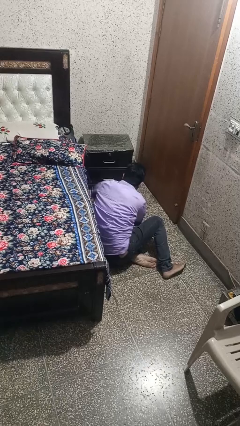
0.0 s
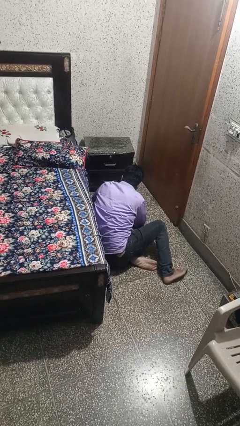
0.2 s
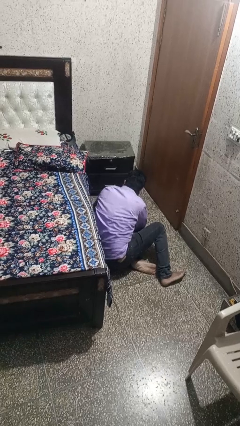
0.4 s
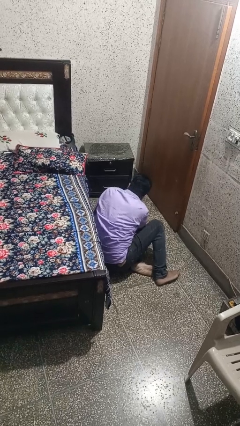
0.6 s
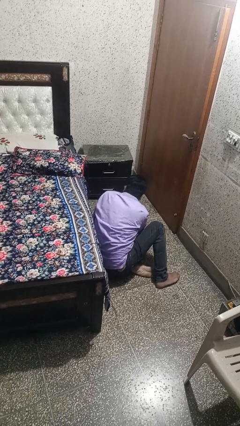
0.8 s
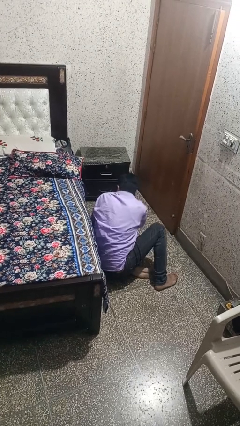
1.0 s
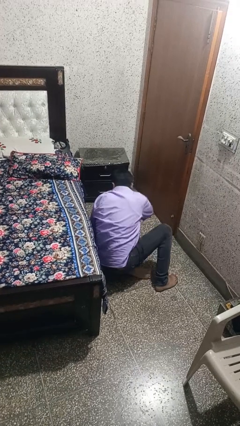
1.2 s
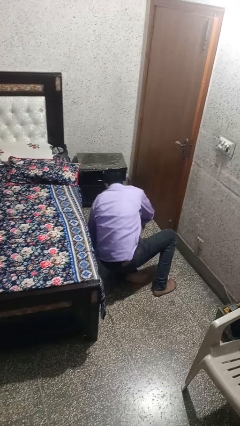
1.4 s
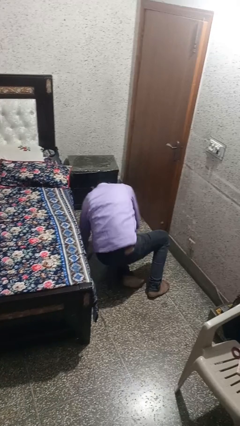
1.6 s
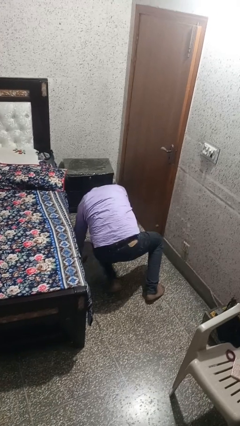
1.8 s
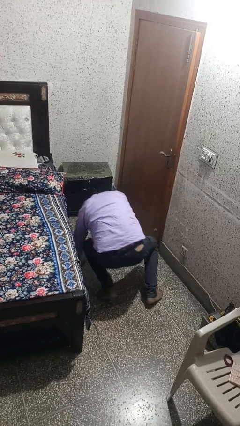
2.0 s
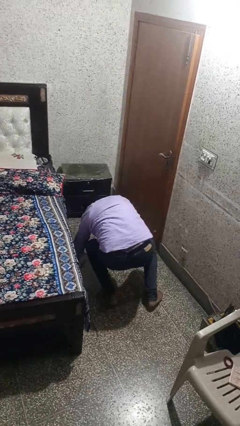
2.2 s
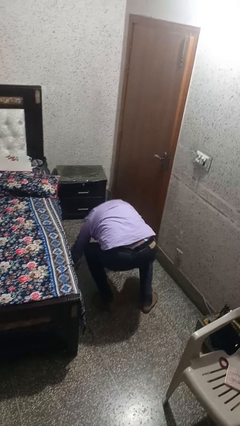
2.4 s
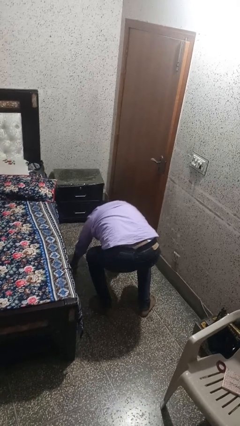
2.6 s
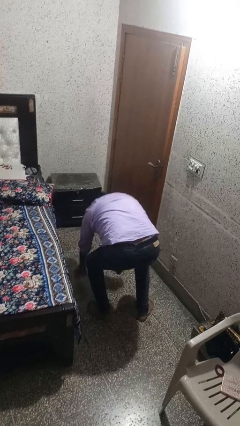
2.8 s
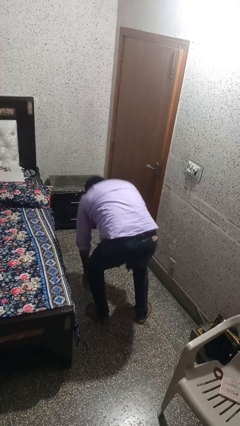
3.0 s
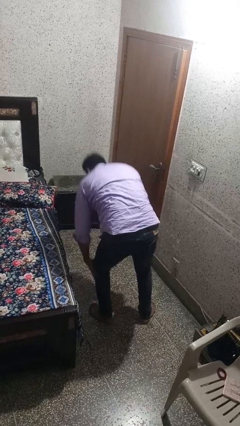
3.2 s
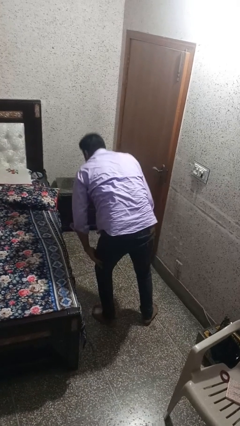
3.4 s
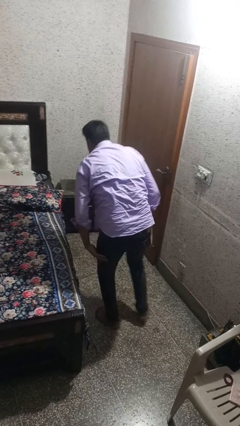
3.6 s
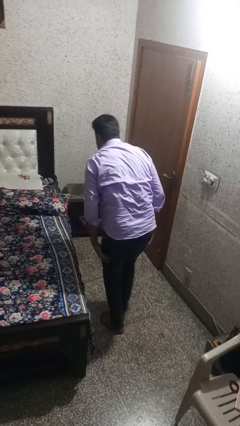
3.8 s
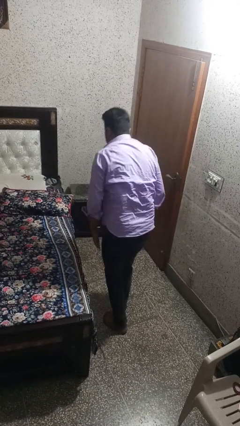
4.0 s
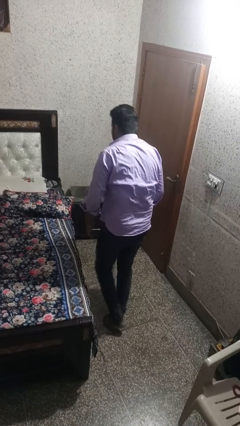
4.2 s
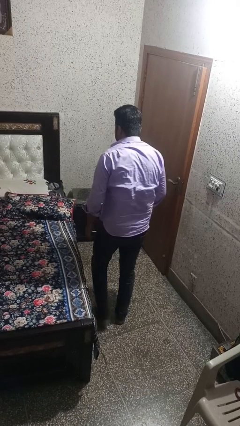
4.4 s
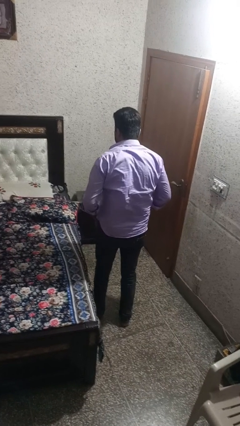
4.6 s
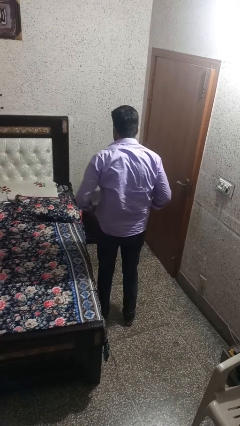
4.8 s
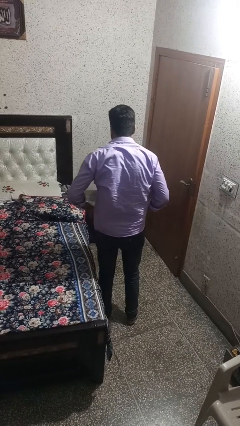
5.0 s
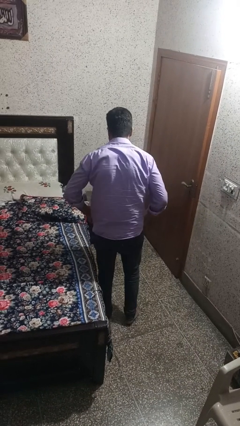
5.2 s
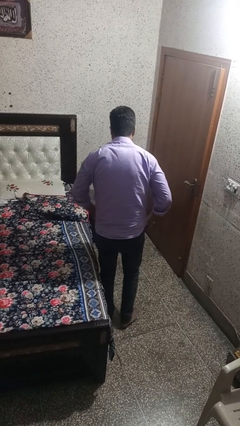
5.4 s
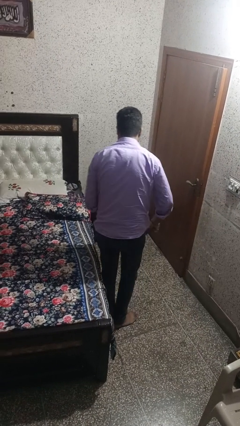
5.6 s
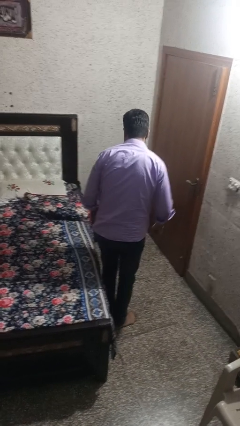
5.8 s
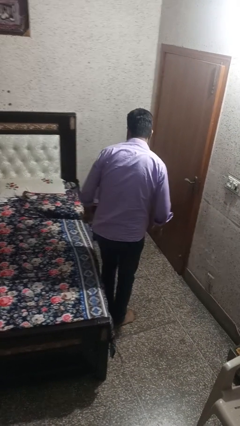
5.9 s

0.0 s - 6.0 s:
person stands up from floor

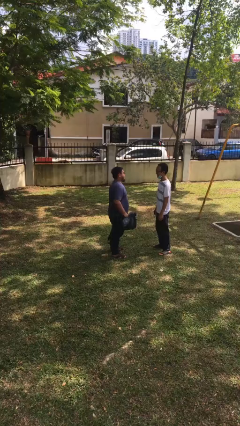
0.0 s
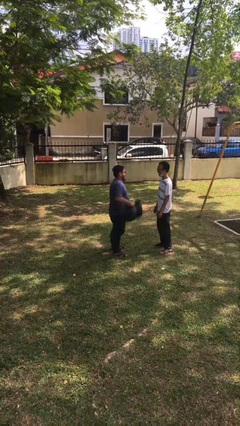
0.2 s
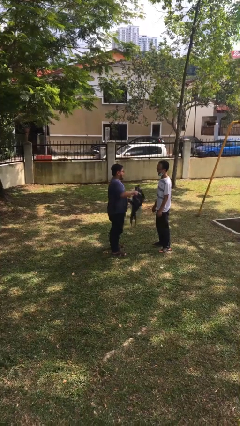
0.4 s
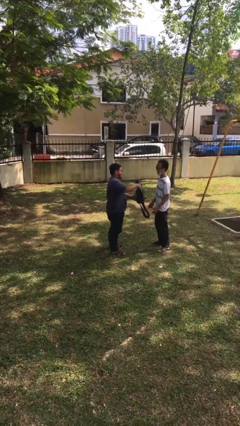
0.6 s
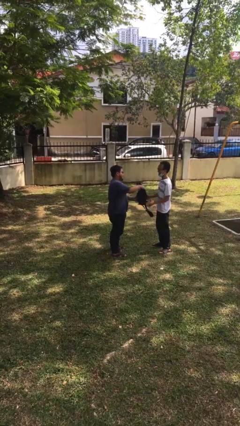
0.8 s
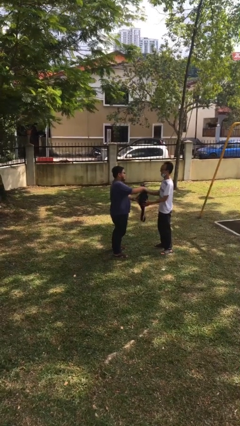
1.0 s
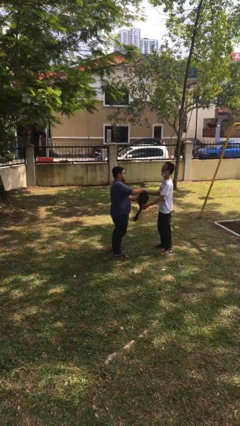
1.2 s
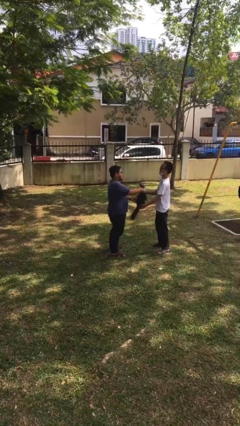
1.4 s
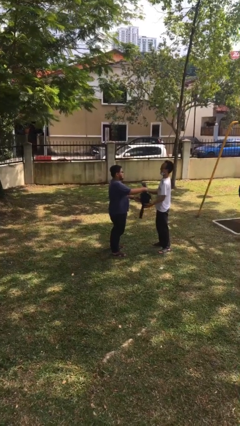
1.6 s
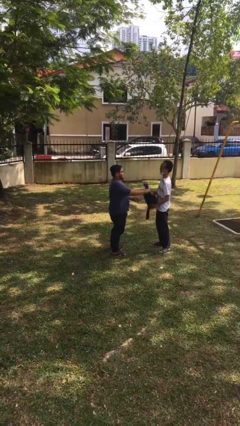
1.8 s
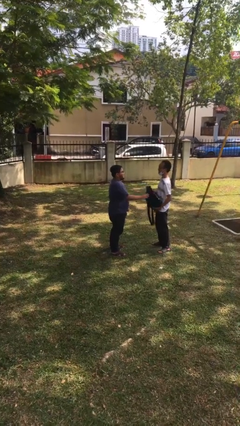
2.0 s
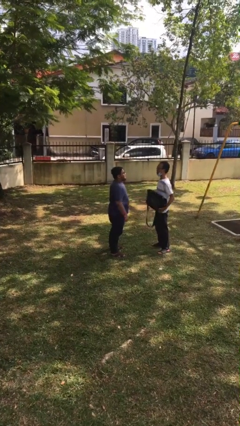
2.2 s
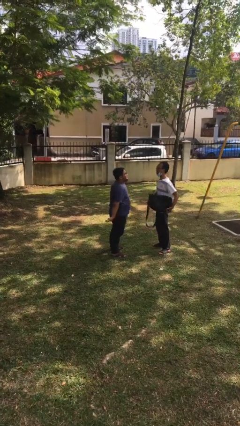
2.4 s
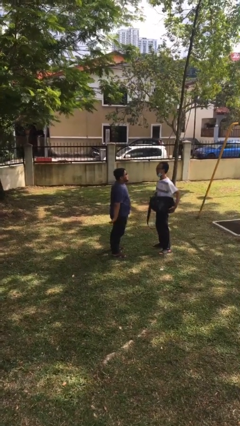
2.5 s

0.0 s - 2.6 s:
person transfers object to person

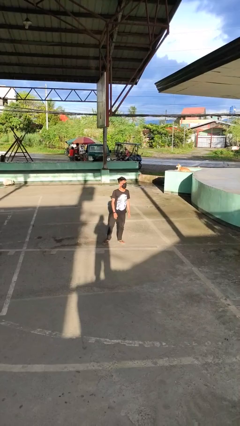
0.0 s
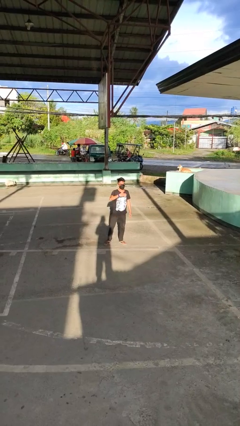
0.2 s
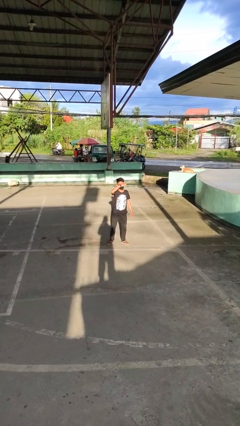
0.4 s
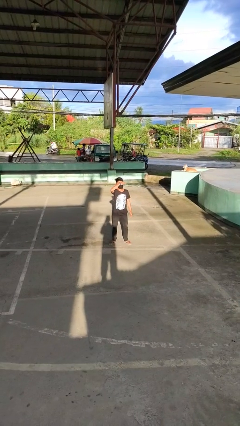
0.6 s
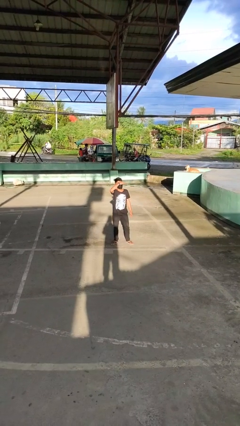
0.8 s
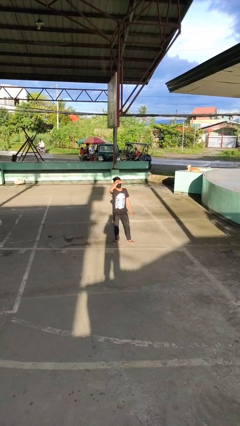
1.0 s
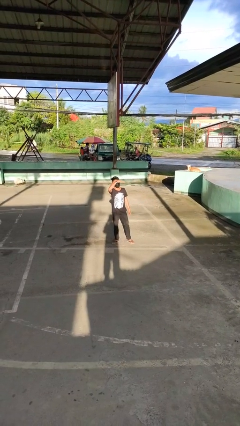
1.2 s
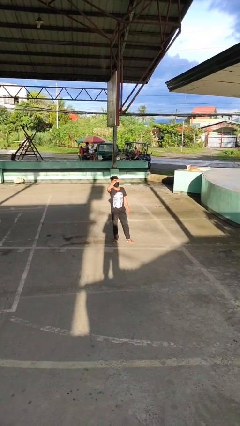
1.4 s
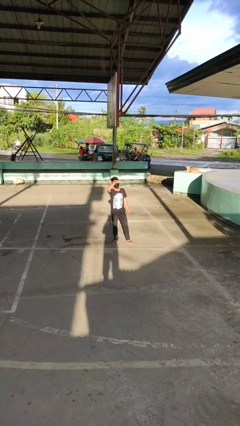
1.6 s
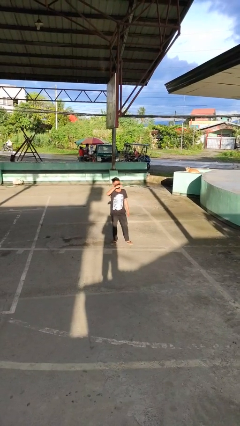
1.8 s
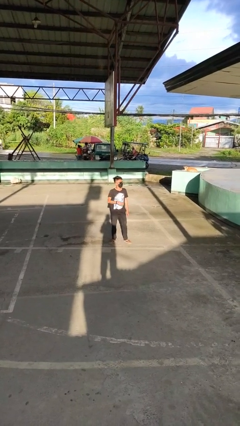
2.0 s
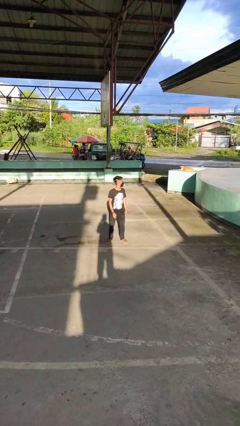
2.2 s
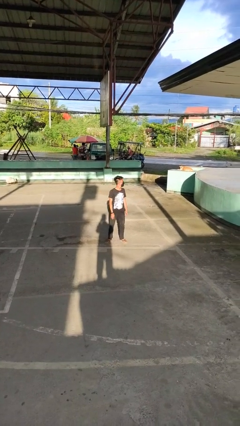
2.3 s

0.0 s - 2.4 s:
person shades eyes

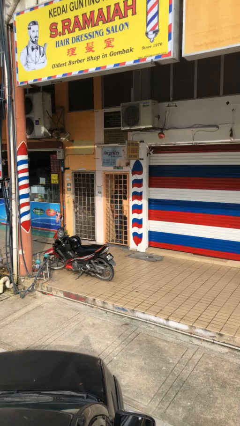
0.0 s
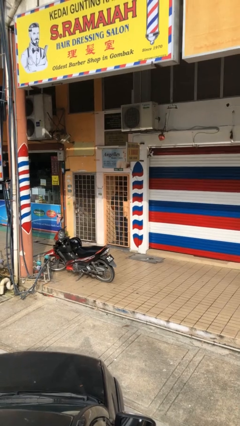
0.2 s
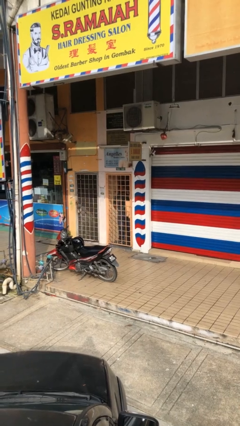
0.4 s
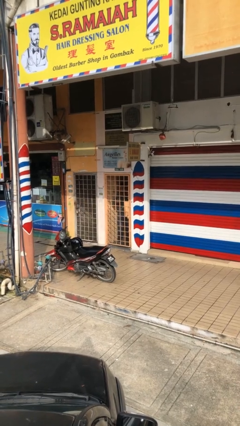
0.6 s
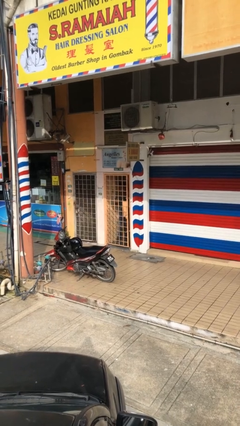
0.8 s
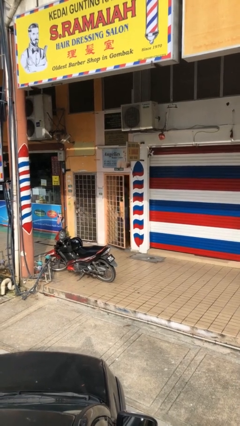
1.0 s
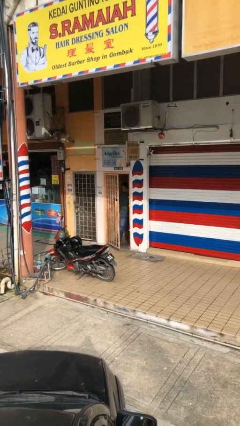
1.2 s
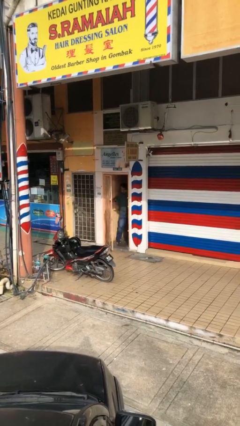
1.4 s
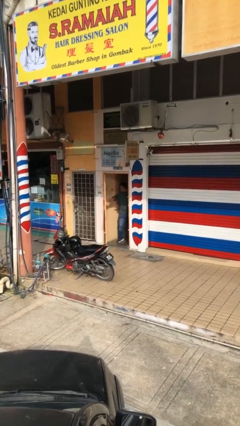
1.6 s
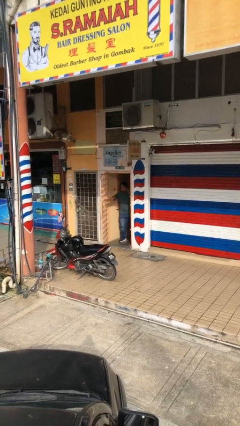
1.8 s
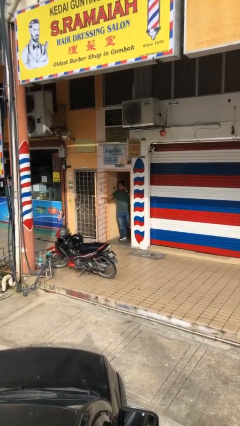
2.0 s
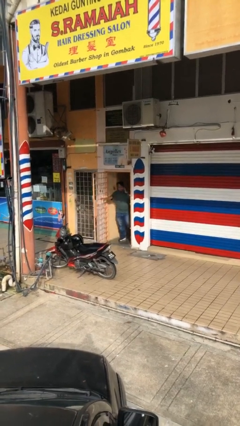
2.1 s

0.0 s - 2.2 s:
person opens facility door

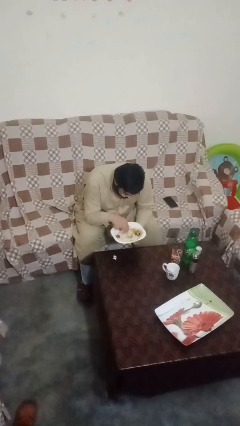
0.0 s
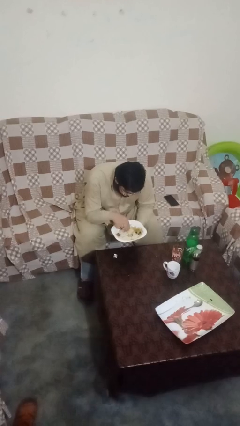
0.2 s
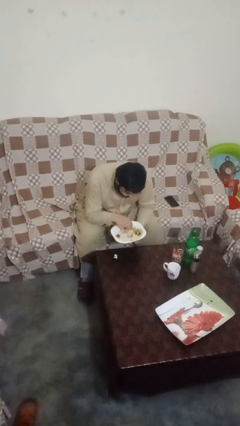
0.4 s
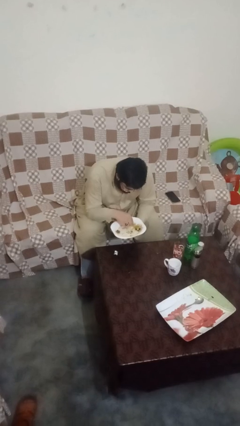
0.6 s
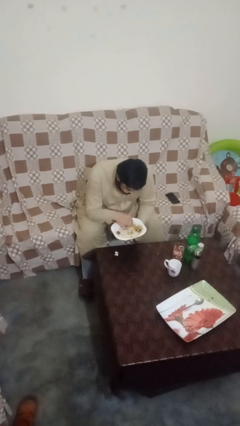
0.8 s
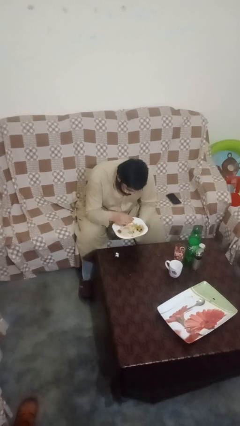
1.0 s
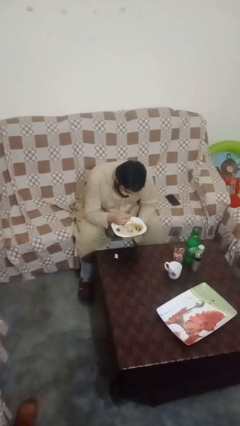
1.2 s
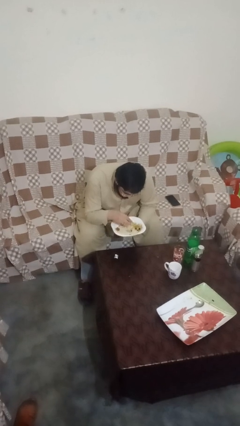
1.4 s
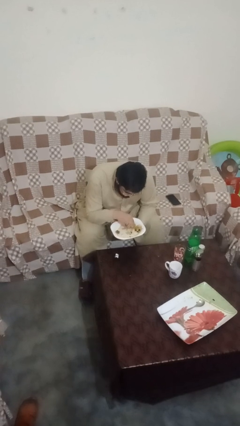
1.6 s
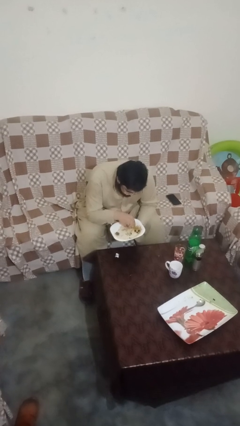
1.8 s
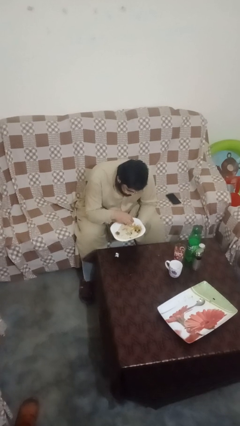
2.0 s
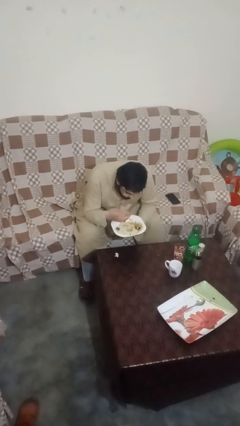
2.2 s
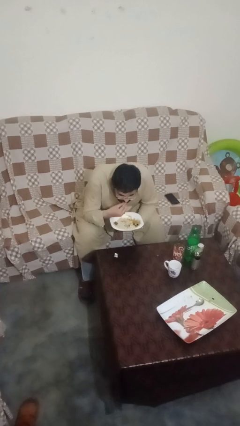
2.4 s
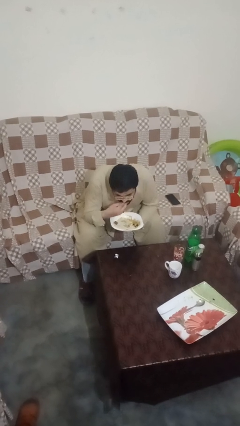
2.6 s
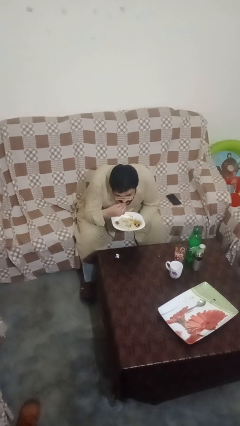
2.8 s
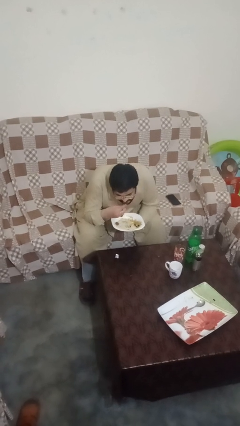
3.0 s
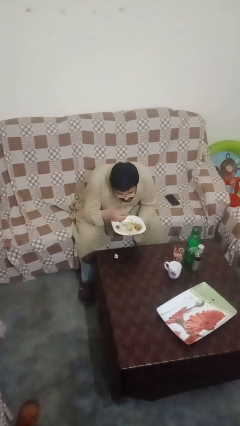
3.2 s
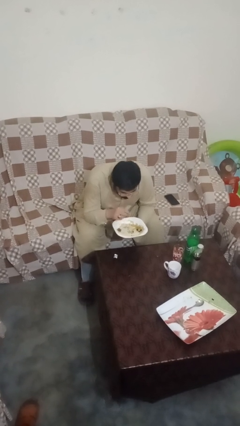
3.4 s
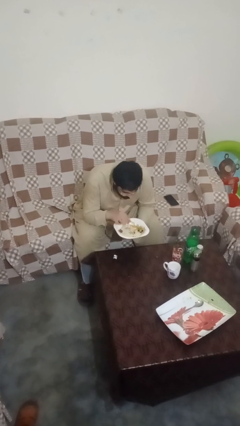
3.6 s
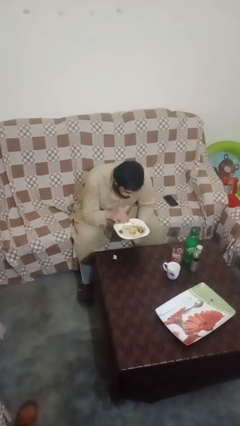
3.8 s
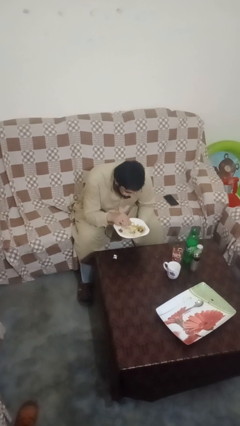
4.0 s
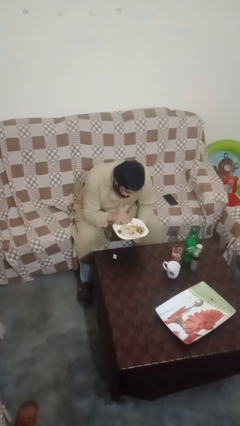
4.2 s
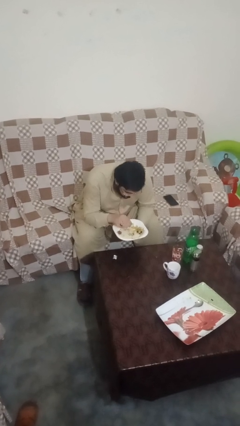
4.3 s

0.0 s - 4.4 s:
person eats with hands
